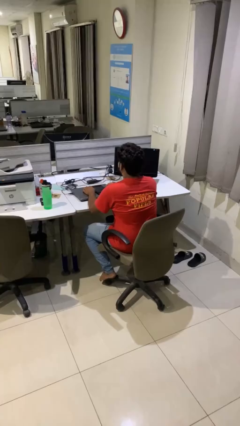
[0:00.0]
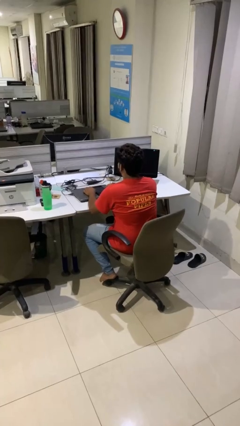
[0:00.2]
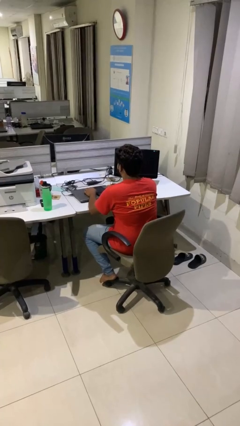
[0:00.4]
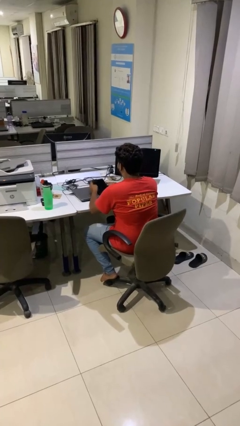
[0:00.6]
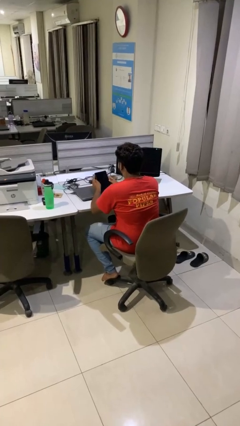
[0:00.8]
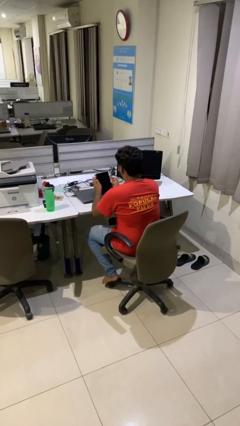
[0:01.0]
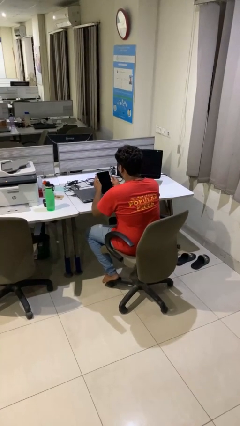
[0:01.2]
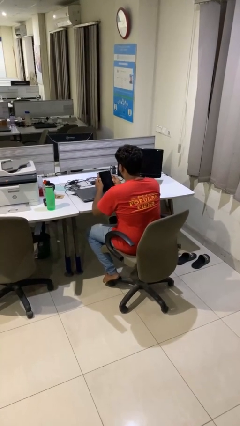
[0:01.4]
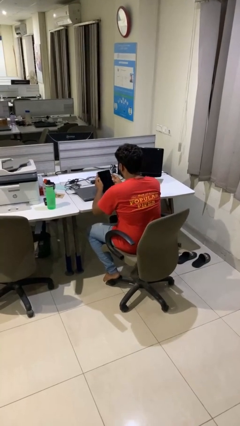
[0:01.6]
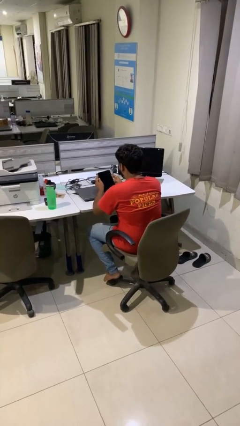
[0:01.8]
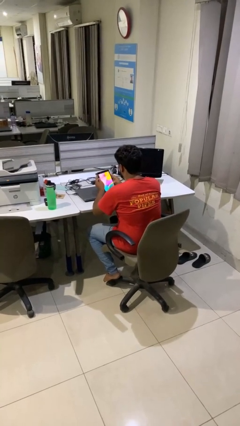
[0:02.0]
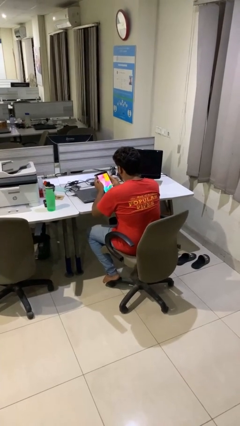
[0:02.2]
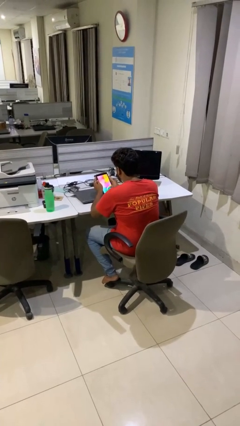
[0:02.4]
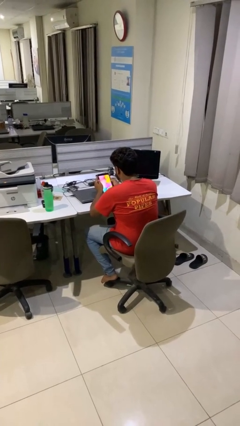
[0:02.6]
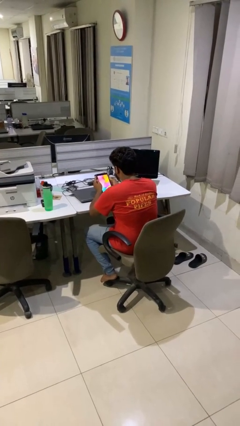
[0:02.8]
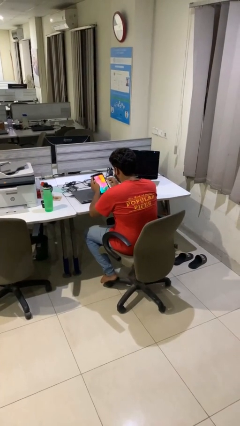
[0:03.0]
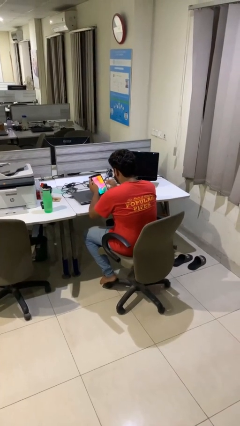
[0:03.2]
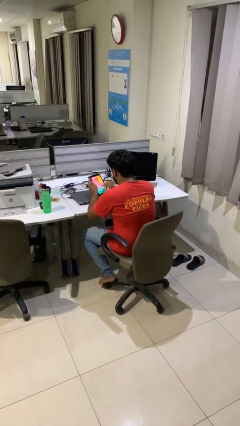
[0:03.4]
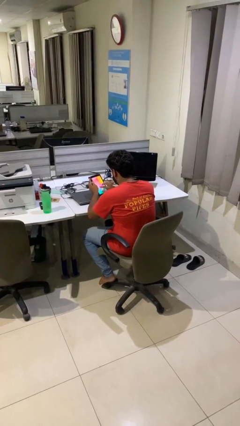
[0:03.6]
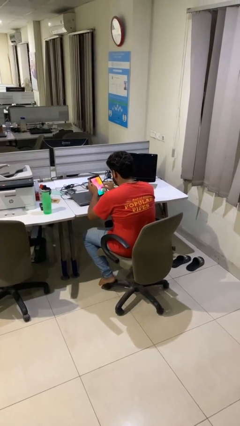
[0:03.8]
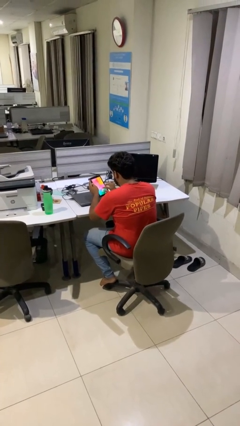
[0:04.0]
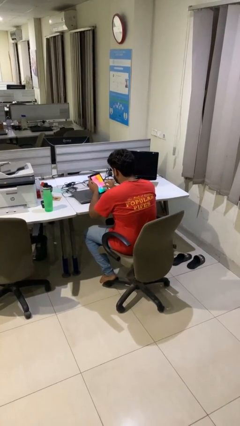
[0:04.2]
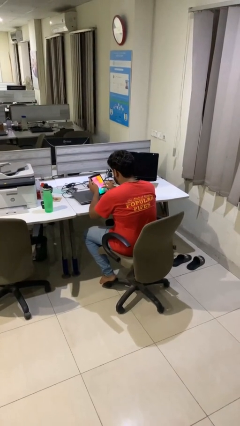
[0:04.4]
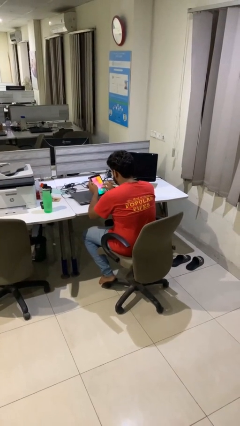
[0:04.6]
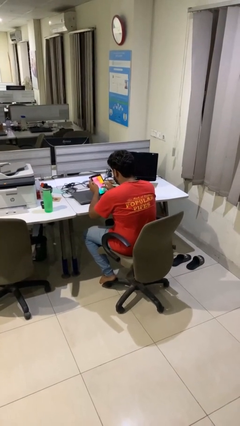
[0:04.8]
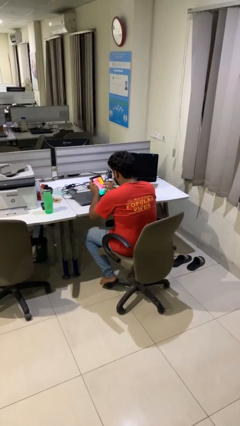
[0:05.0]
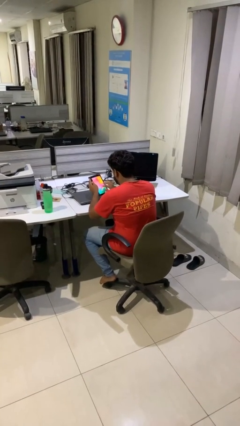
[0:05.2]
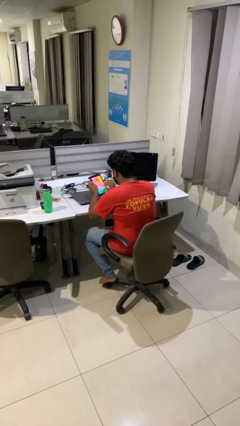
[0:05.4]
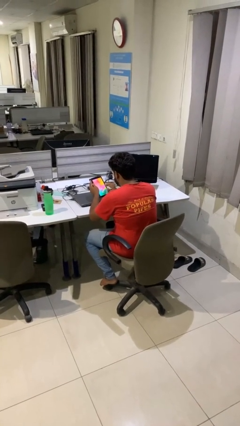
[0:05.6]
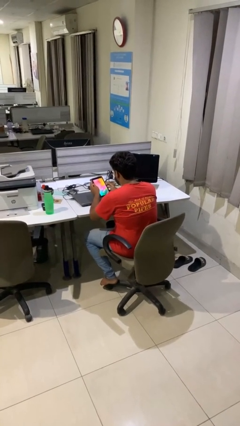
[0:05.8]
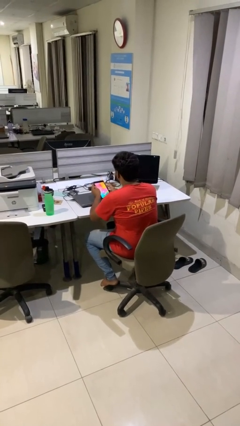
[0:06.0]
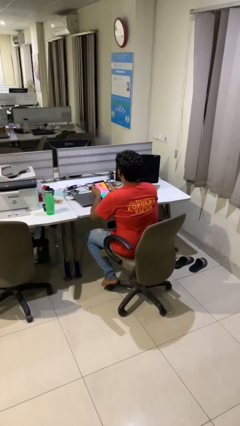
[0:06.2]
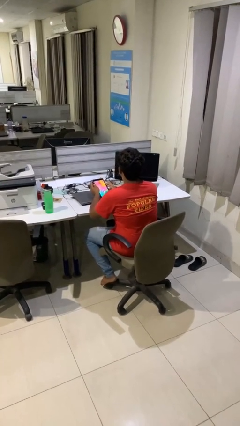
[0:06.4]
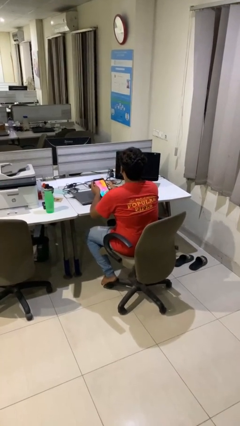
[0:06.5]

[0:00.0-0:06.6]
person interacts with tablet

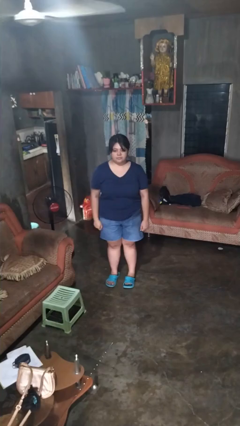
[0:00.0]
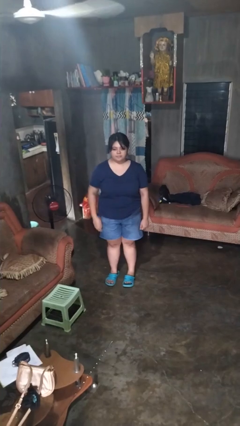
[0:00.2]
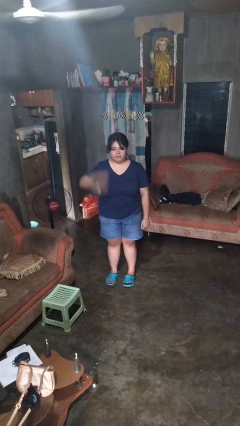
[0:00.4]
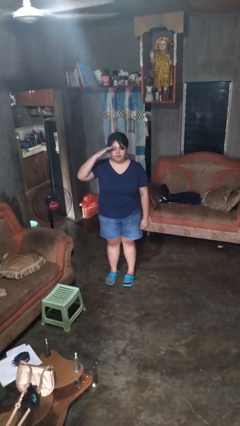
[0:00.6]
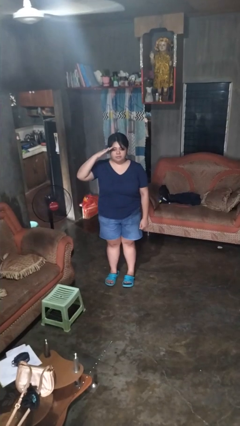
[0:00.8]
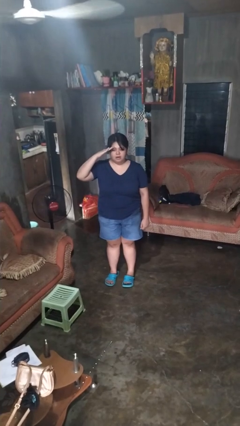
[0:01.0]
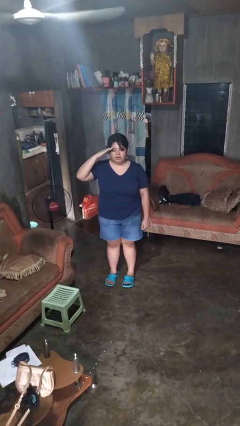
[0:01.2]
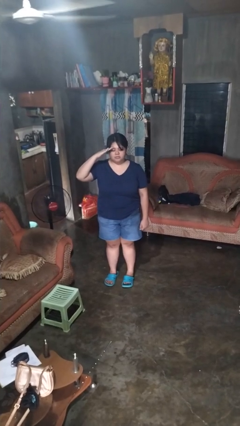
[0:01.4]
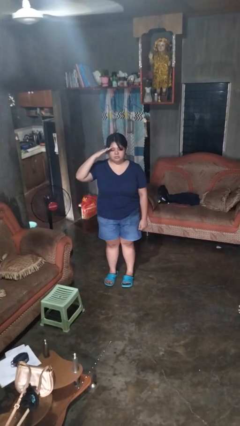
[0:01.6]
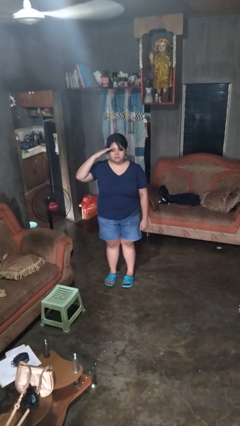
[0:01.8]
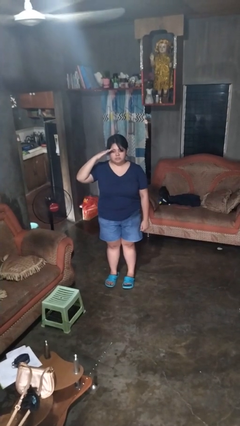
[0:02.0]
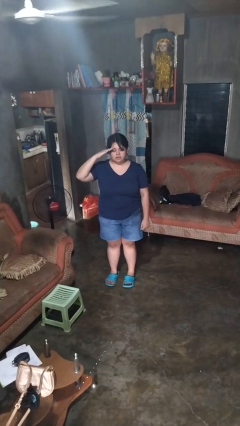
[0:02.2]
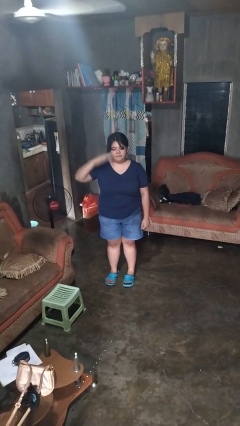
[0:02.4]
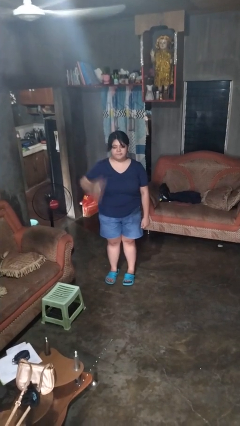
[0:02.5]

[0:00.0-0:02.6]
person salutes

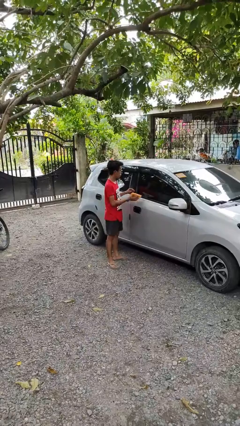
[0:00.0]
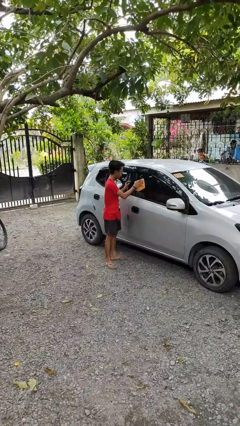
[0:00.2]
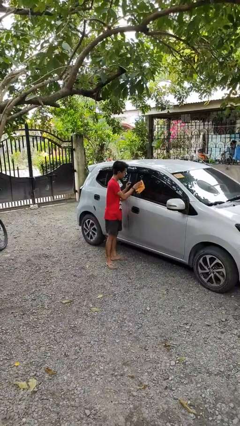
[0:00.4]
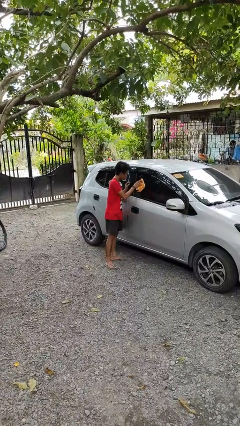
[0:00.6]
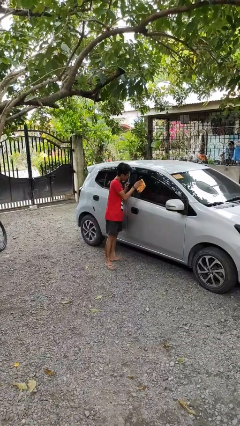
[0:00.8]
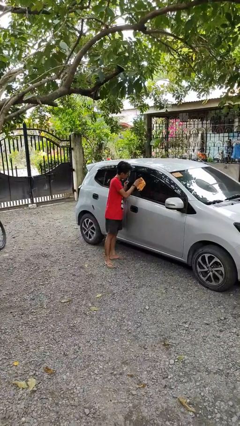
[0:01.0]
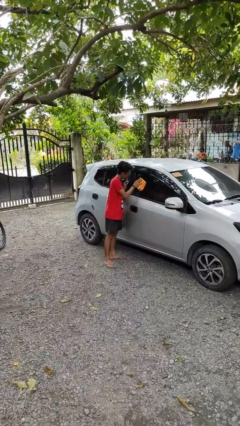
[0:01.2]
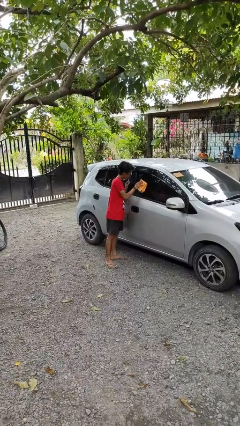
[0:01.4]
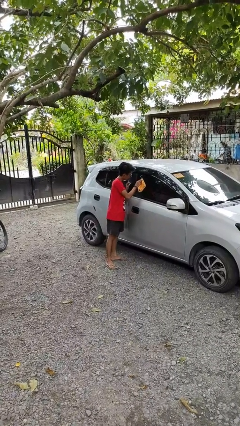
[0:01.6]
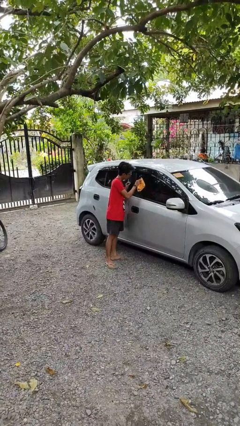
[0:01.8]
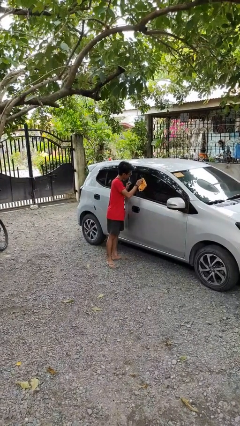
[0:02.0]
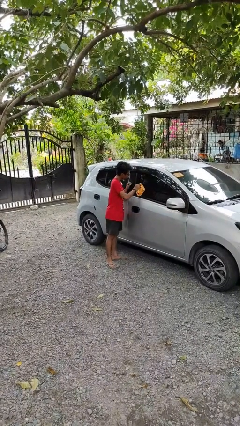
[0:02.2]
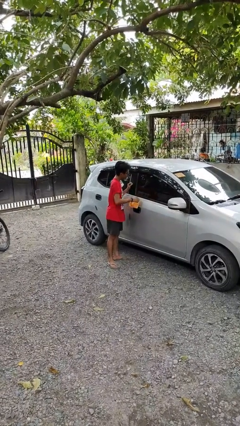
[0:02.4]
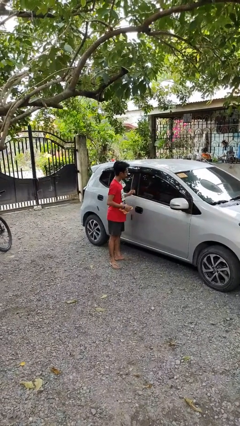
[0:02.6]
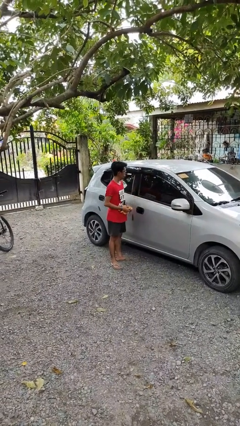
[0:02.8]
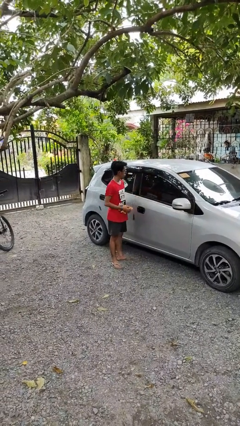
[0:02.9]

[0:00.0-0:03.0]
person polishes car with rag

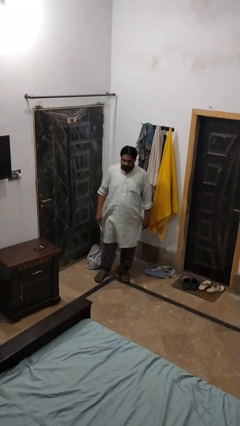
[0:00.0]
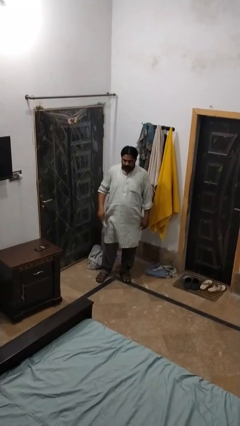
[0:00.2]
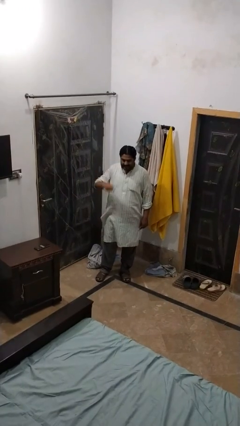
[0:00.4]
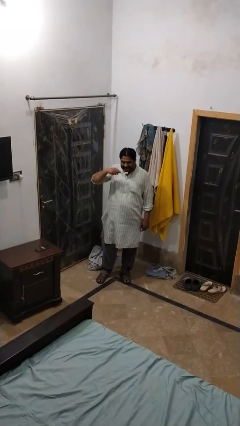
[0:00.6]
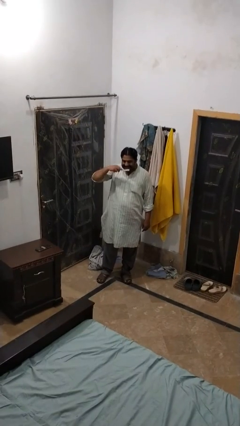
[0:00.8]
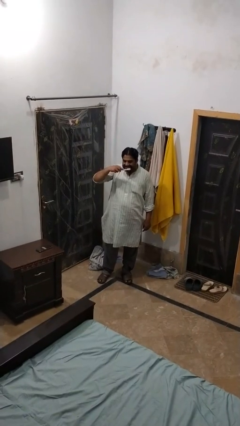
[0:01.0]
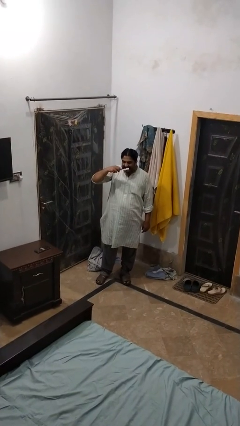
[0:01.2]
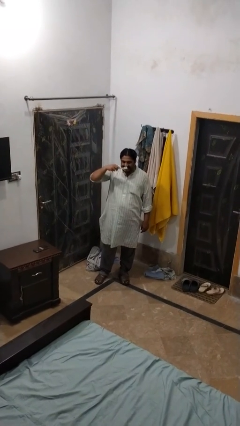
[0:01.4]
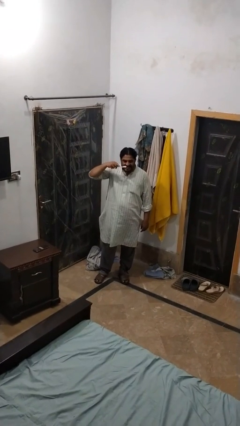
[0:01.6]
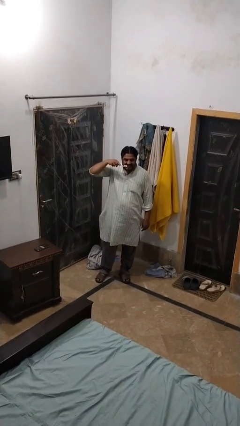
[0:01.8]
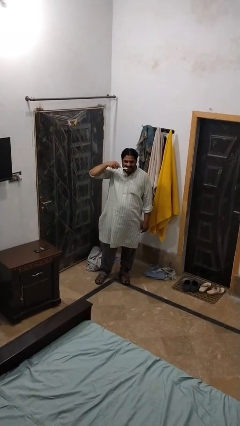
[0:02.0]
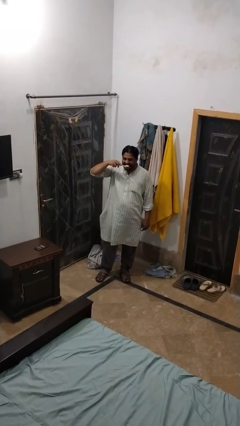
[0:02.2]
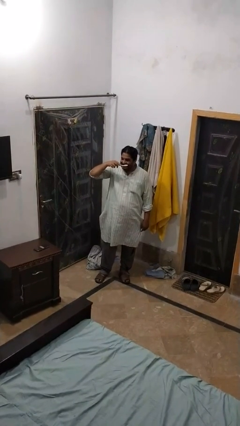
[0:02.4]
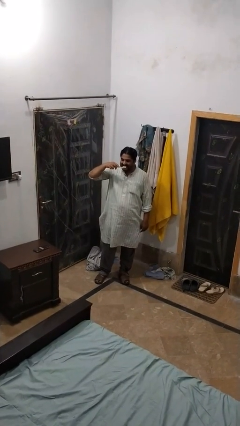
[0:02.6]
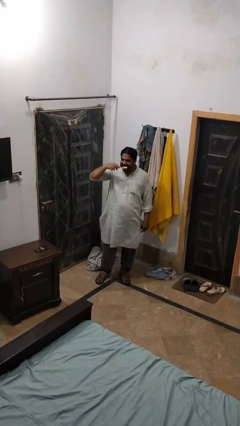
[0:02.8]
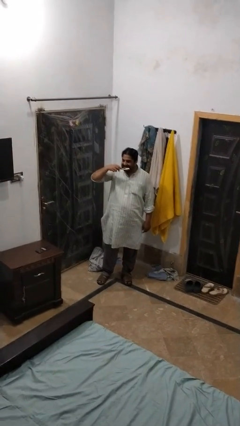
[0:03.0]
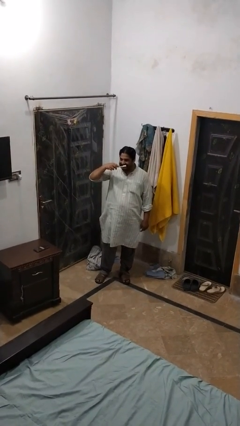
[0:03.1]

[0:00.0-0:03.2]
person brushes teeth

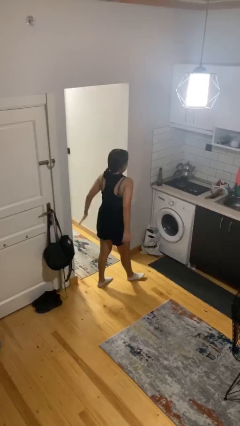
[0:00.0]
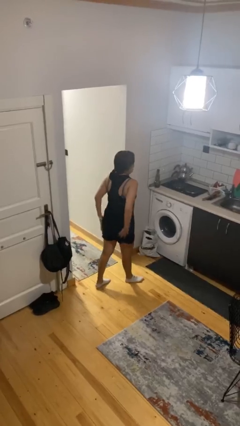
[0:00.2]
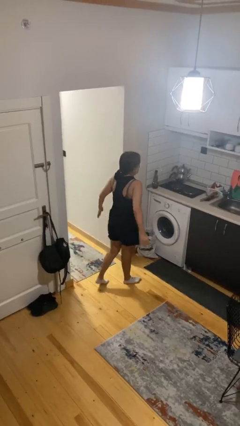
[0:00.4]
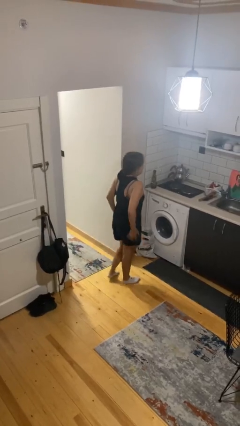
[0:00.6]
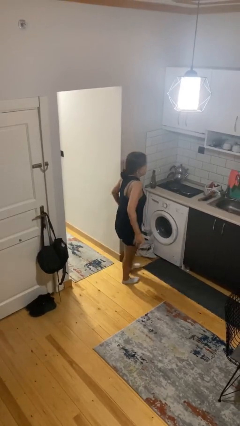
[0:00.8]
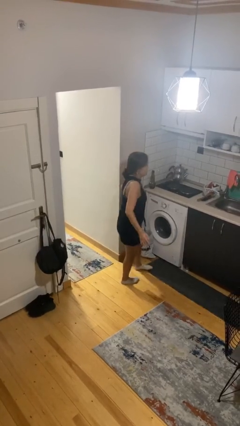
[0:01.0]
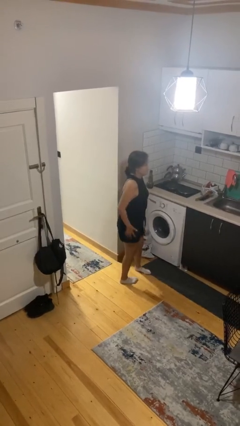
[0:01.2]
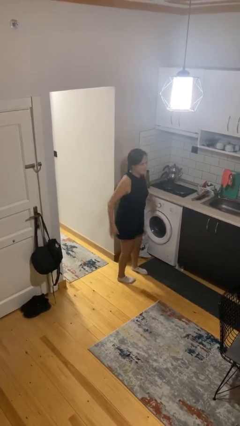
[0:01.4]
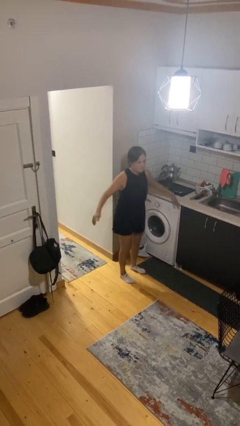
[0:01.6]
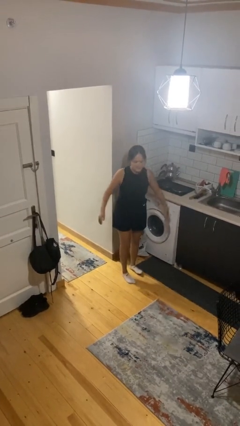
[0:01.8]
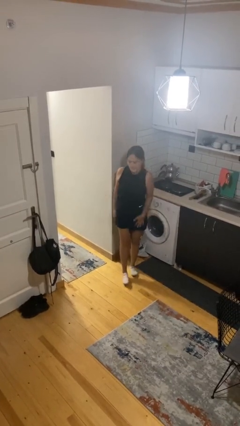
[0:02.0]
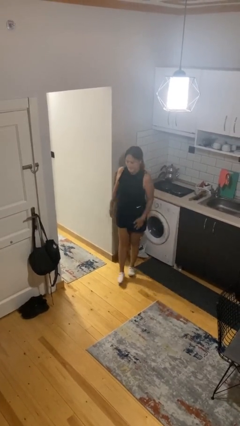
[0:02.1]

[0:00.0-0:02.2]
person slaps hands on thighs
